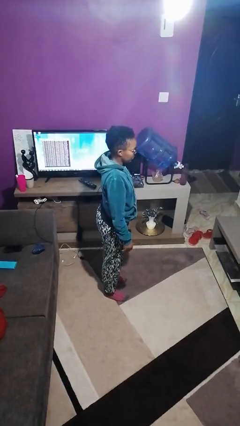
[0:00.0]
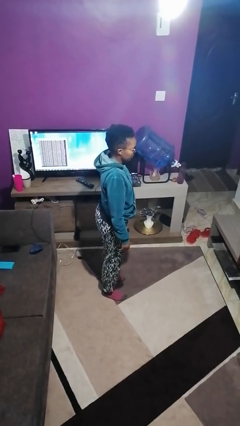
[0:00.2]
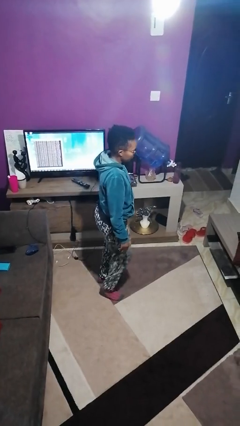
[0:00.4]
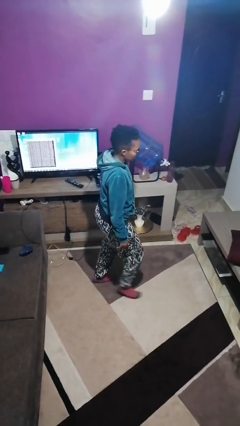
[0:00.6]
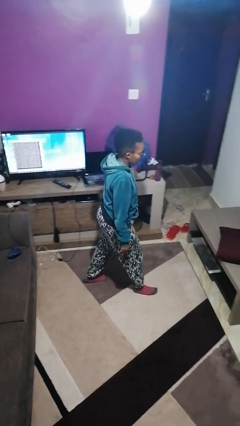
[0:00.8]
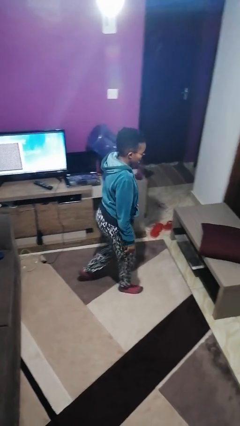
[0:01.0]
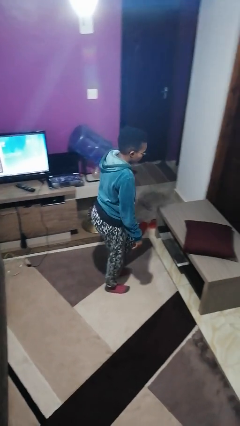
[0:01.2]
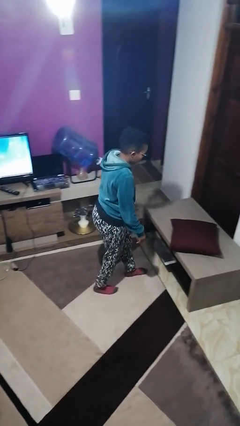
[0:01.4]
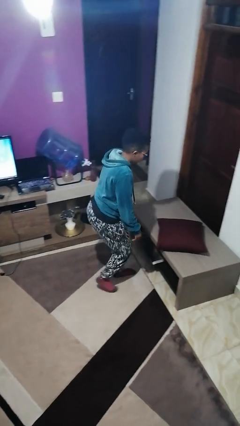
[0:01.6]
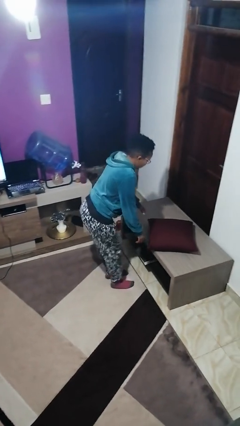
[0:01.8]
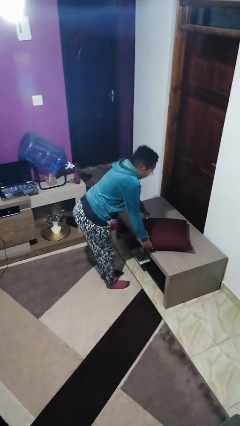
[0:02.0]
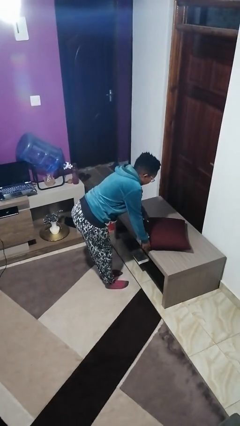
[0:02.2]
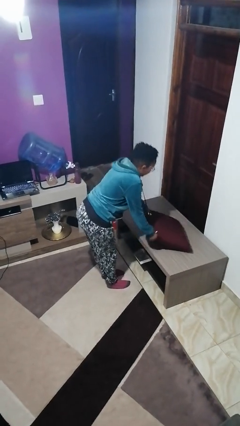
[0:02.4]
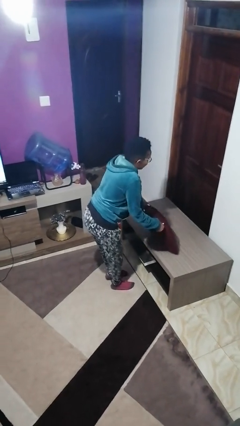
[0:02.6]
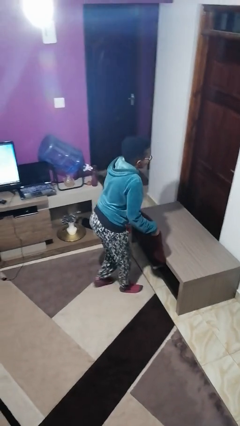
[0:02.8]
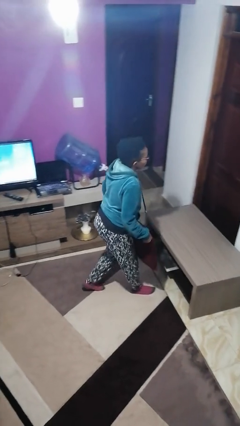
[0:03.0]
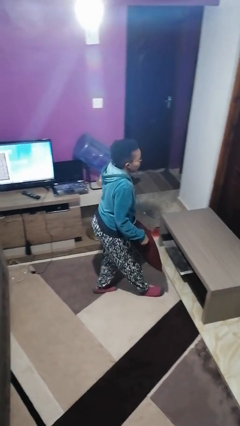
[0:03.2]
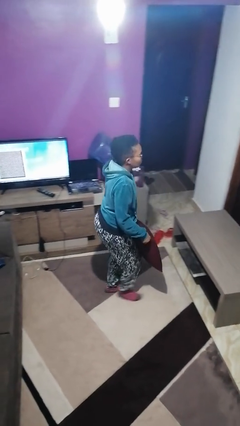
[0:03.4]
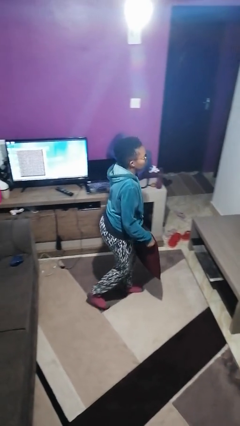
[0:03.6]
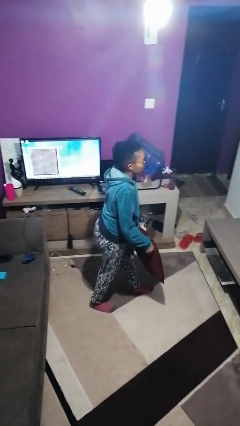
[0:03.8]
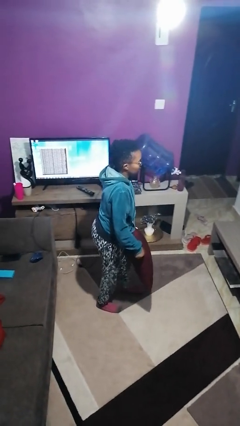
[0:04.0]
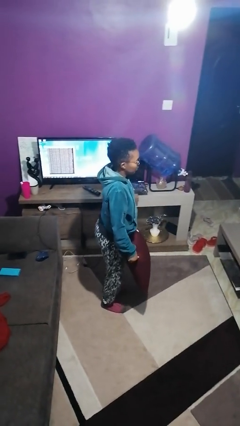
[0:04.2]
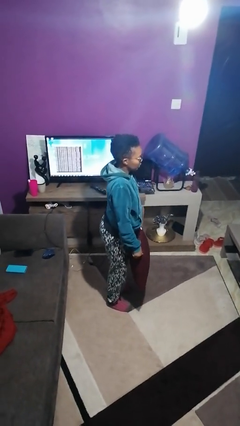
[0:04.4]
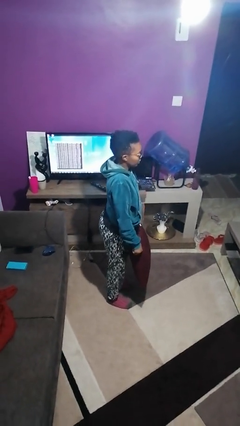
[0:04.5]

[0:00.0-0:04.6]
person picks up object from table

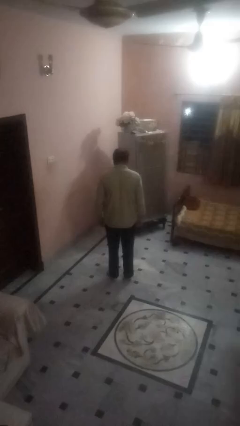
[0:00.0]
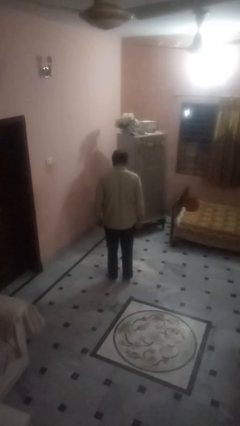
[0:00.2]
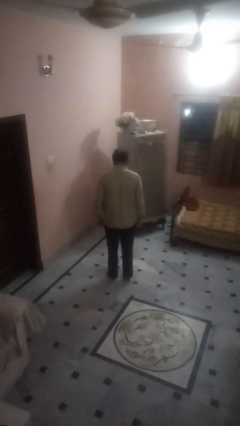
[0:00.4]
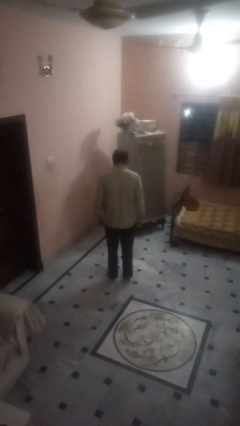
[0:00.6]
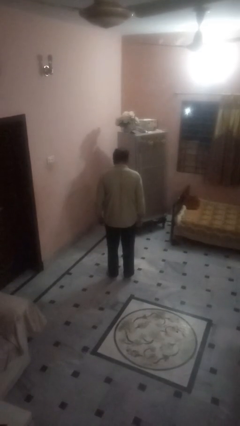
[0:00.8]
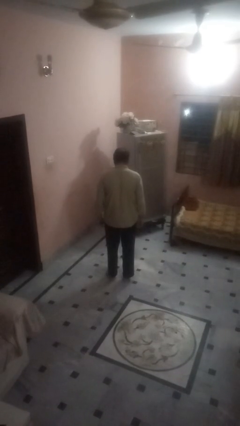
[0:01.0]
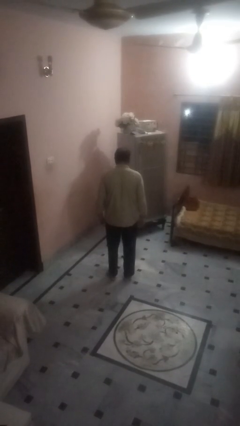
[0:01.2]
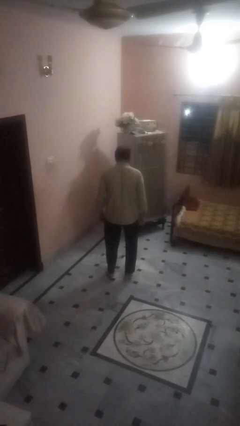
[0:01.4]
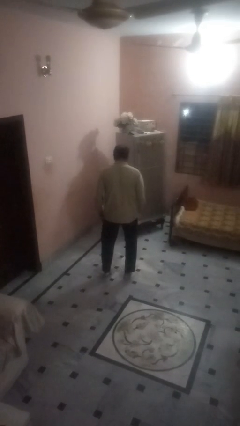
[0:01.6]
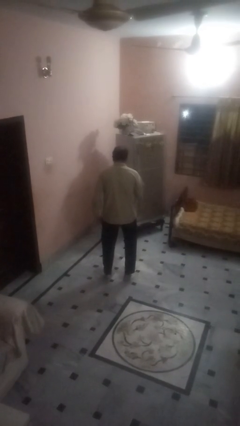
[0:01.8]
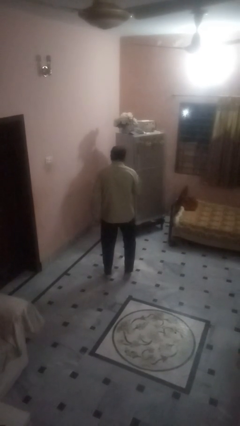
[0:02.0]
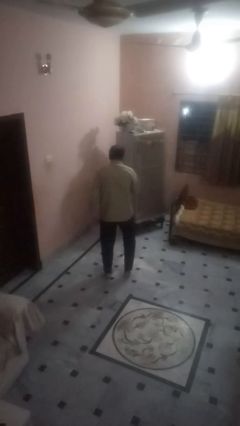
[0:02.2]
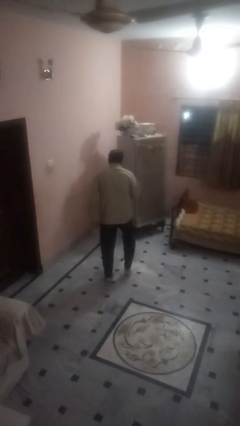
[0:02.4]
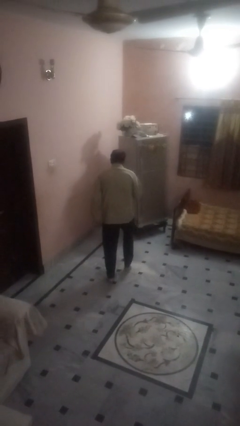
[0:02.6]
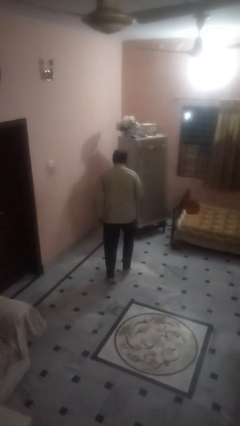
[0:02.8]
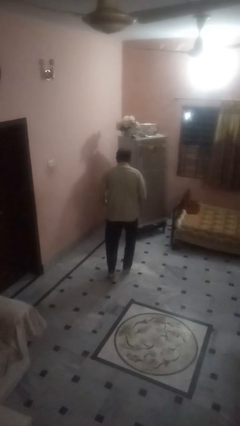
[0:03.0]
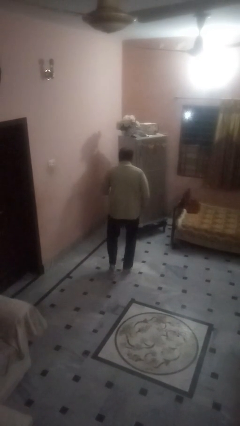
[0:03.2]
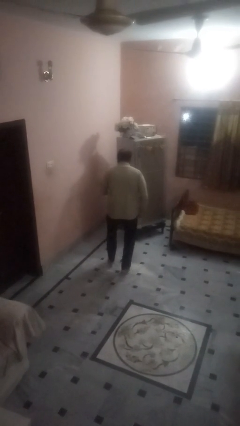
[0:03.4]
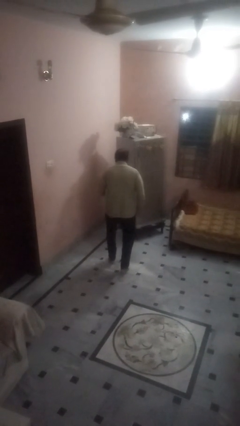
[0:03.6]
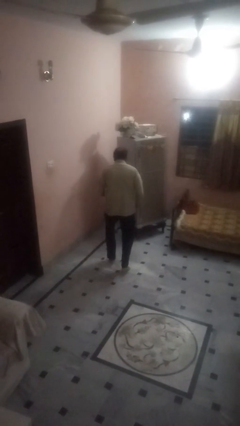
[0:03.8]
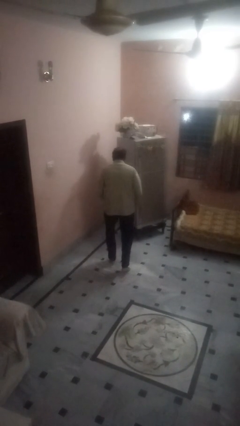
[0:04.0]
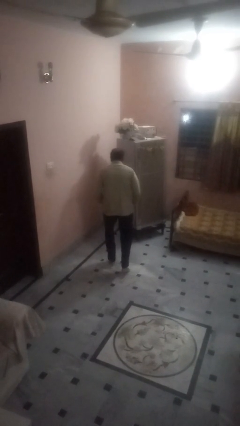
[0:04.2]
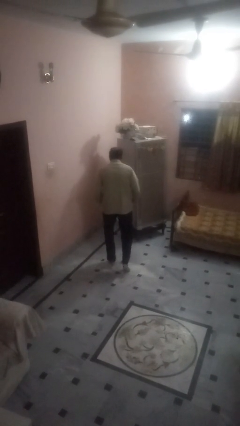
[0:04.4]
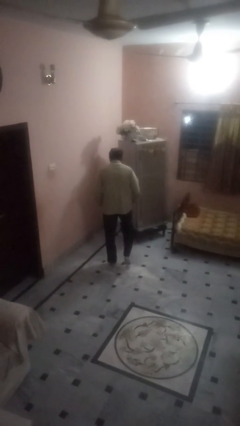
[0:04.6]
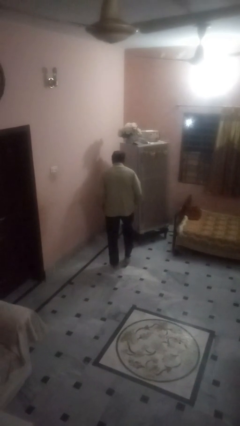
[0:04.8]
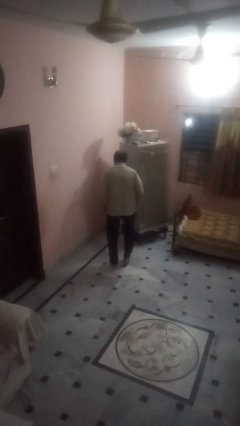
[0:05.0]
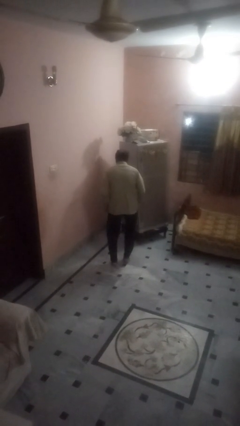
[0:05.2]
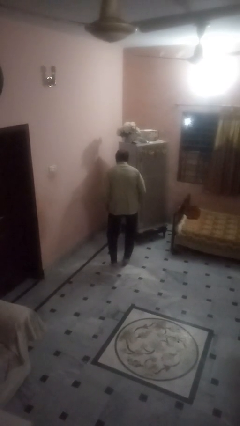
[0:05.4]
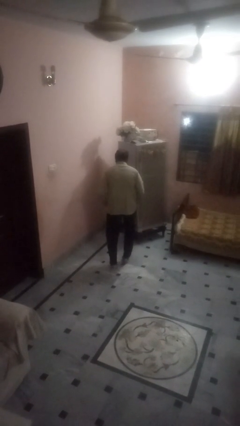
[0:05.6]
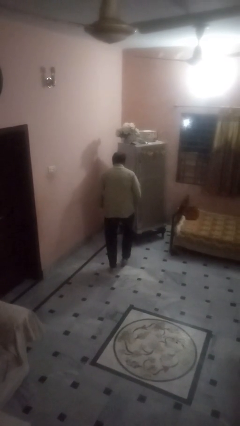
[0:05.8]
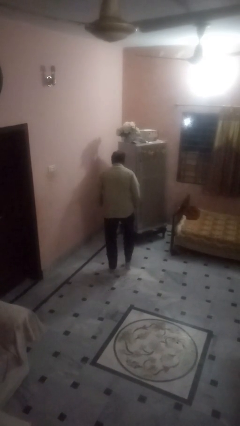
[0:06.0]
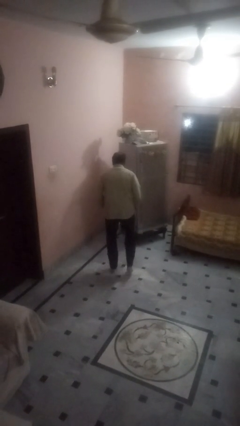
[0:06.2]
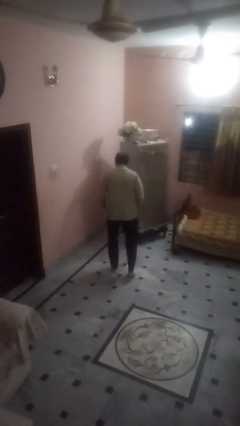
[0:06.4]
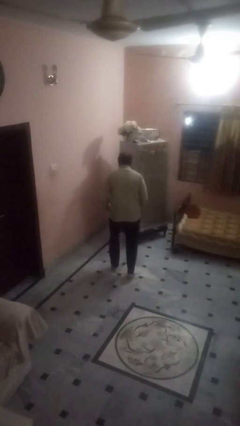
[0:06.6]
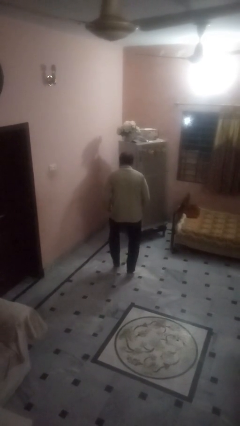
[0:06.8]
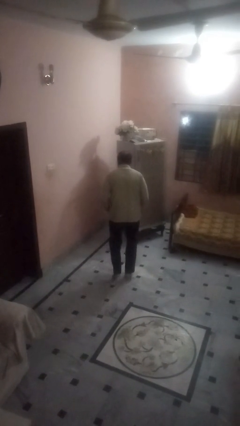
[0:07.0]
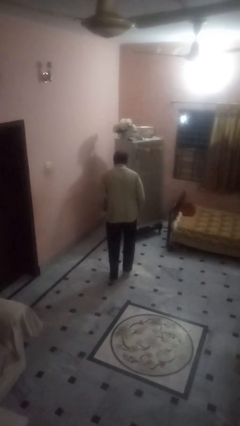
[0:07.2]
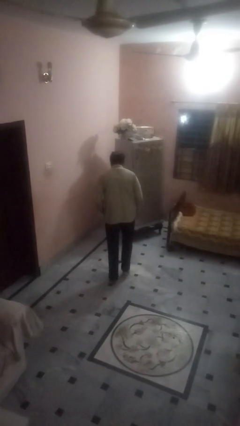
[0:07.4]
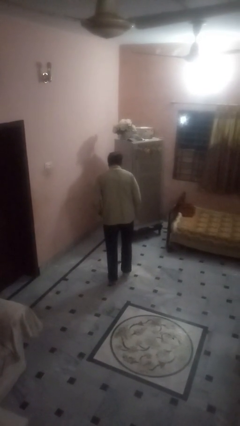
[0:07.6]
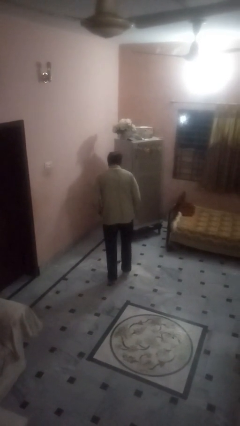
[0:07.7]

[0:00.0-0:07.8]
person walks tiptoe

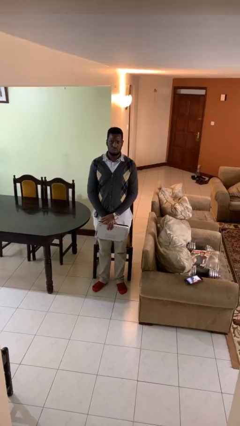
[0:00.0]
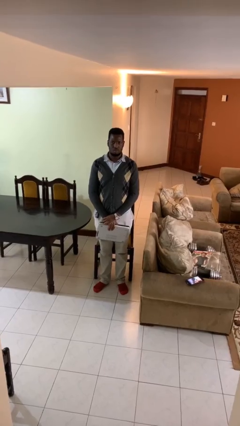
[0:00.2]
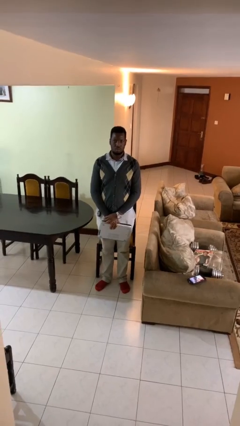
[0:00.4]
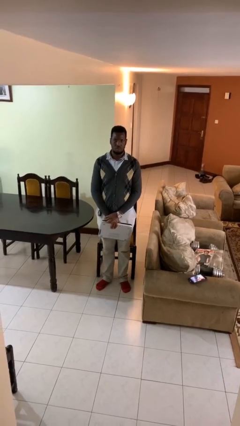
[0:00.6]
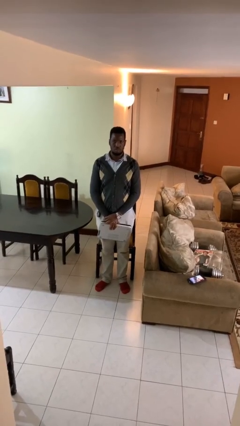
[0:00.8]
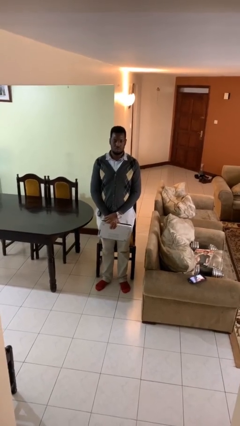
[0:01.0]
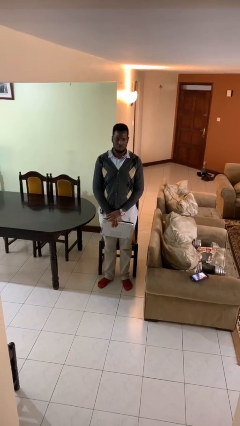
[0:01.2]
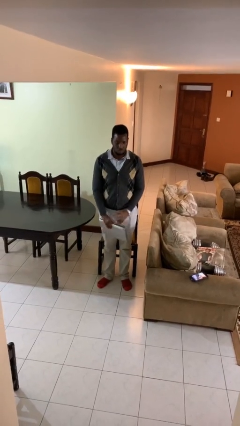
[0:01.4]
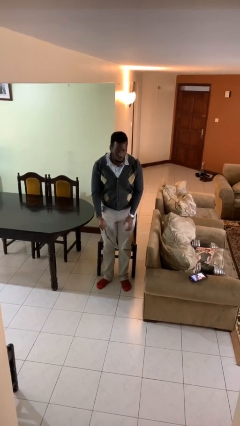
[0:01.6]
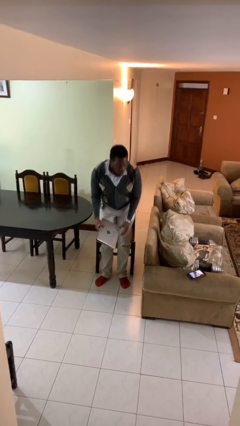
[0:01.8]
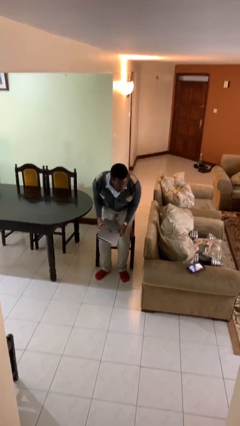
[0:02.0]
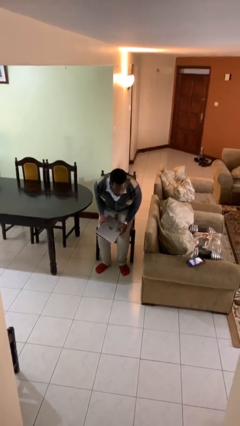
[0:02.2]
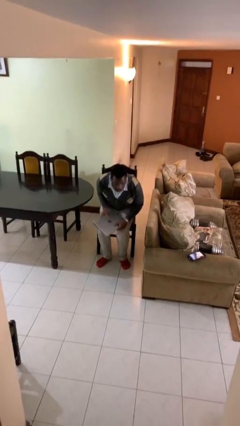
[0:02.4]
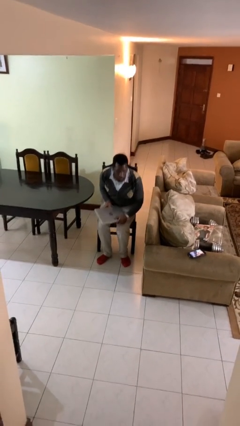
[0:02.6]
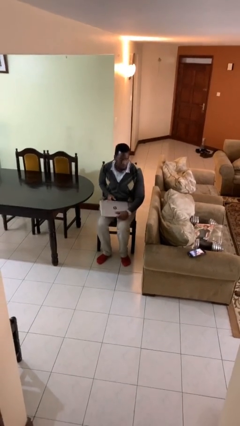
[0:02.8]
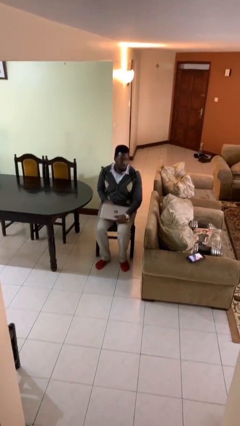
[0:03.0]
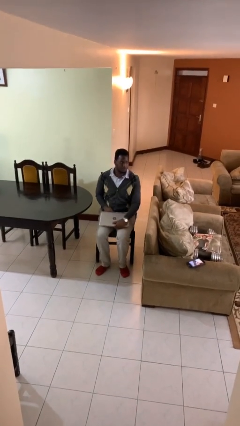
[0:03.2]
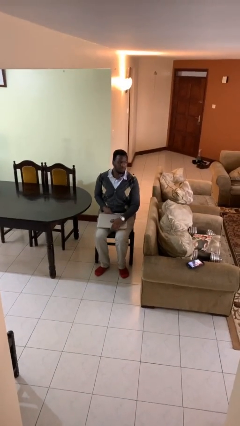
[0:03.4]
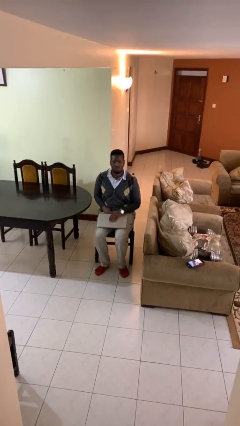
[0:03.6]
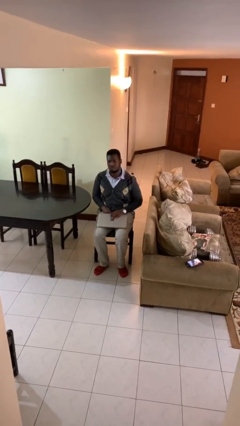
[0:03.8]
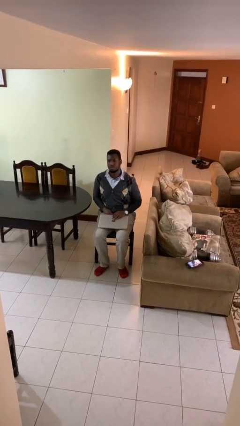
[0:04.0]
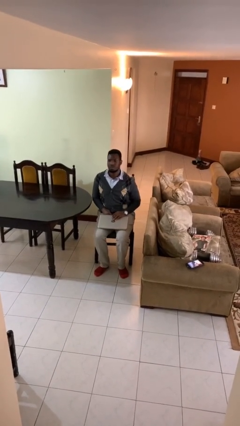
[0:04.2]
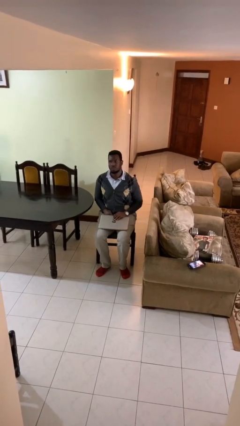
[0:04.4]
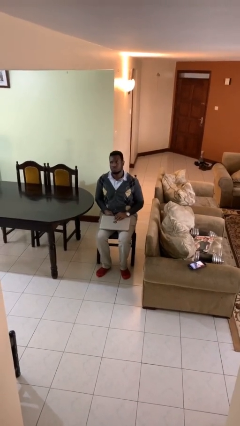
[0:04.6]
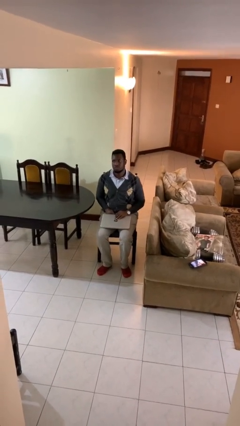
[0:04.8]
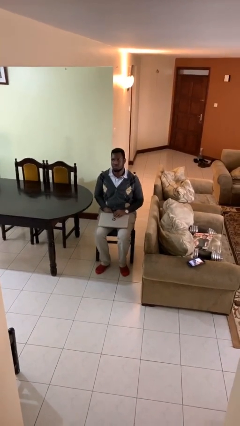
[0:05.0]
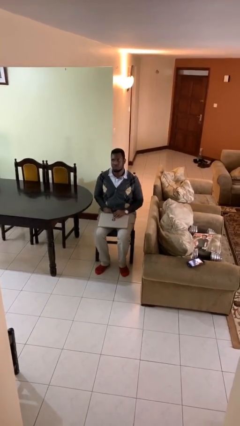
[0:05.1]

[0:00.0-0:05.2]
person sits down

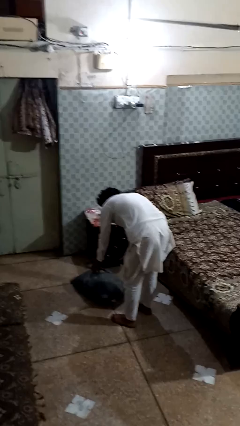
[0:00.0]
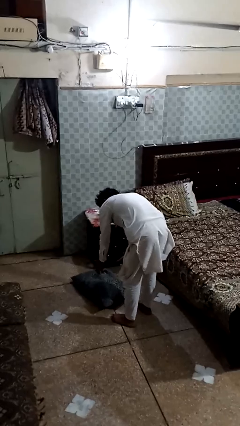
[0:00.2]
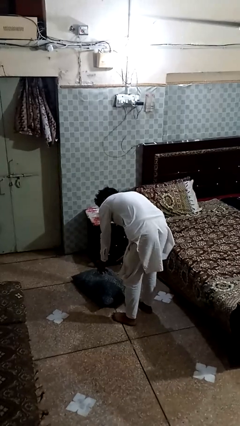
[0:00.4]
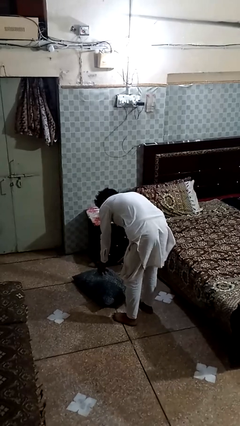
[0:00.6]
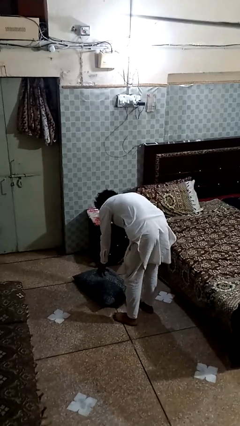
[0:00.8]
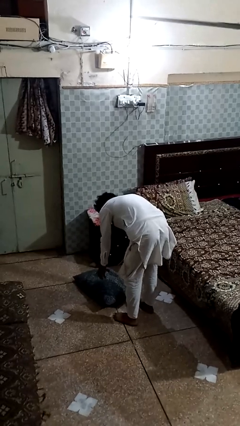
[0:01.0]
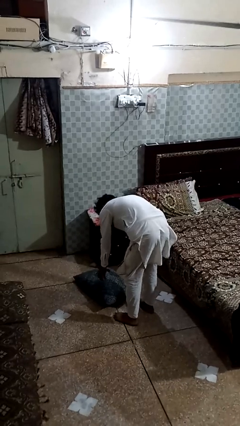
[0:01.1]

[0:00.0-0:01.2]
person catches dropped object
